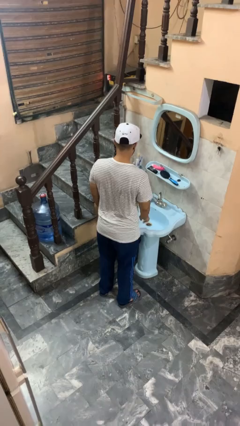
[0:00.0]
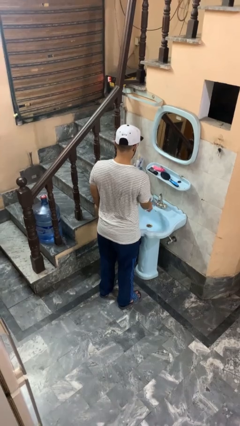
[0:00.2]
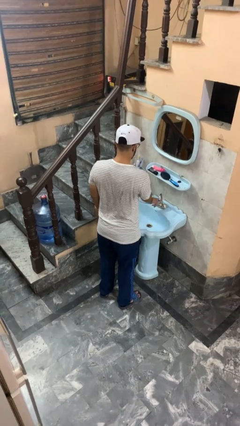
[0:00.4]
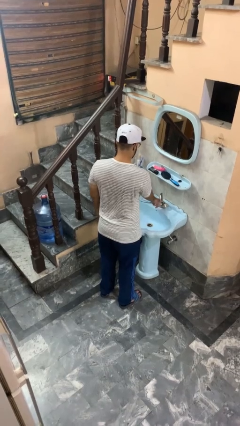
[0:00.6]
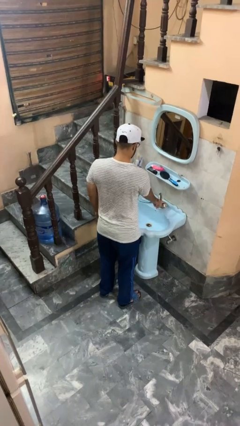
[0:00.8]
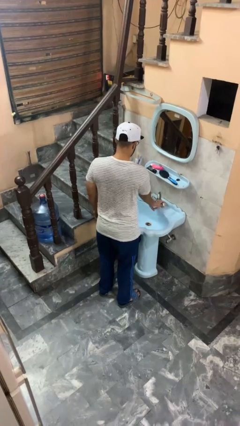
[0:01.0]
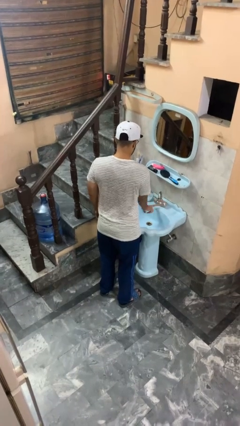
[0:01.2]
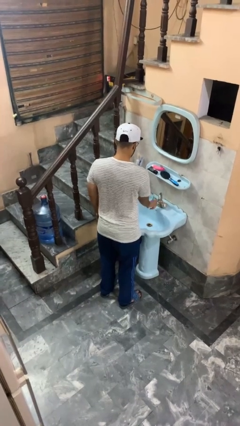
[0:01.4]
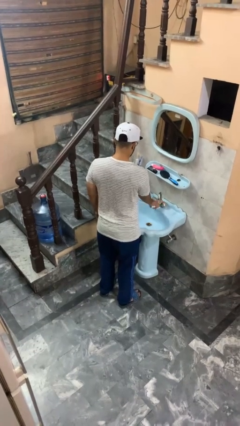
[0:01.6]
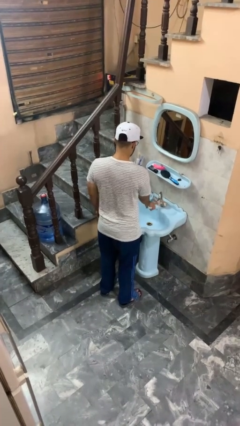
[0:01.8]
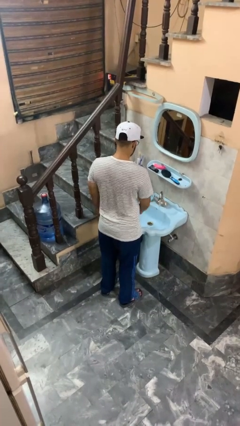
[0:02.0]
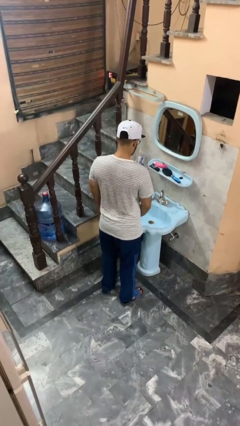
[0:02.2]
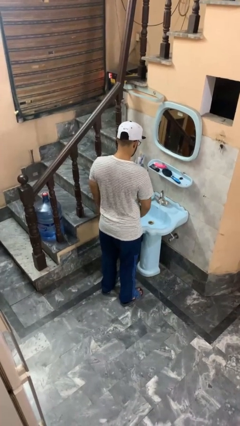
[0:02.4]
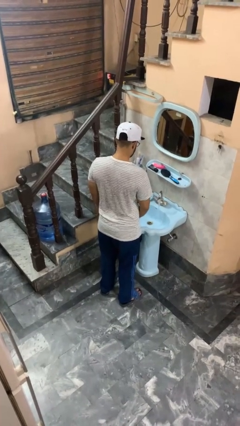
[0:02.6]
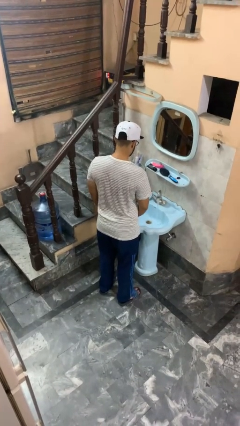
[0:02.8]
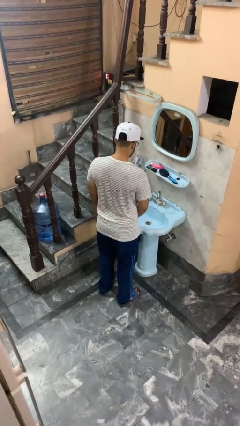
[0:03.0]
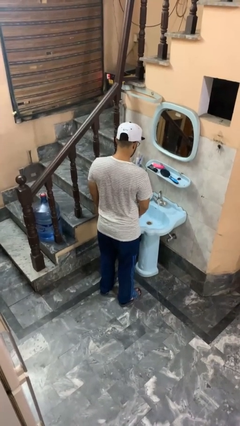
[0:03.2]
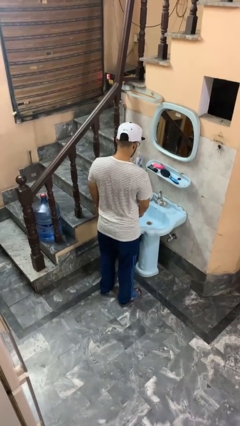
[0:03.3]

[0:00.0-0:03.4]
person turns on faucet

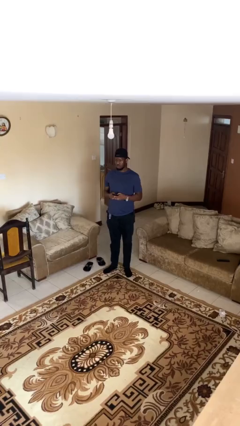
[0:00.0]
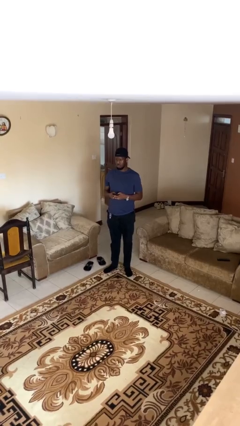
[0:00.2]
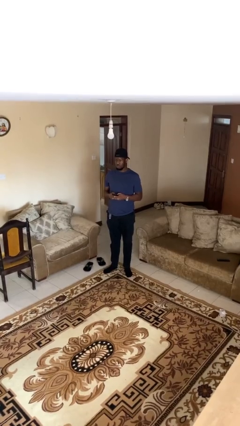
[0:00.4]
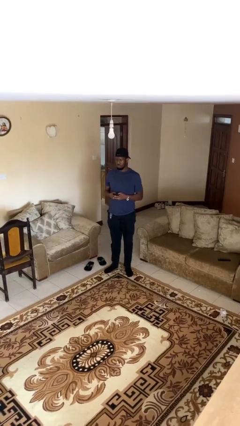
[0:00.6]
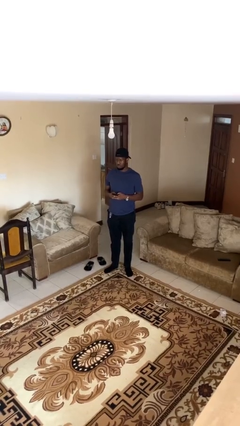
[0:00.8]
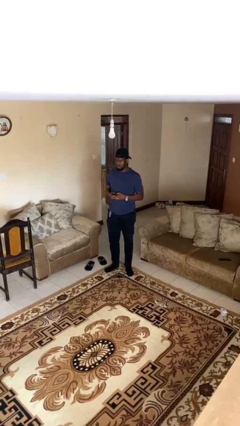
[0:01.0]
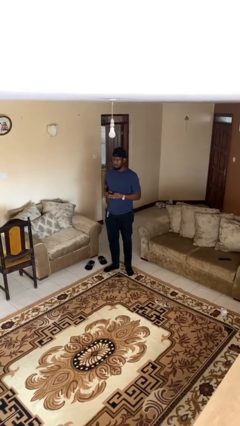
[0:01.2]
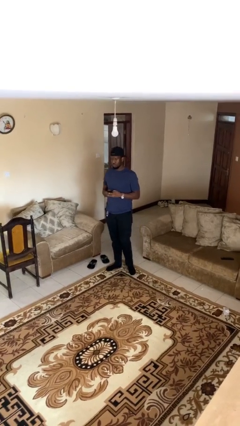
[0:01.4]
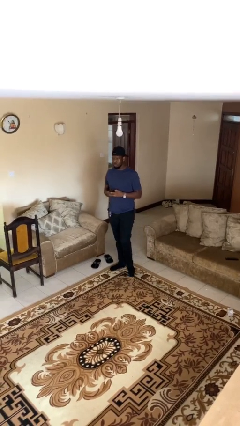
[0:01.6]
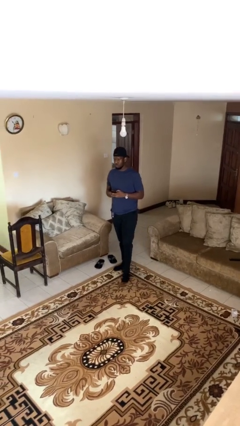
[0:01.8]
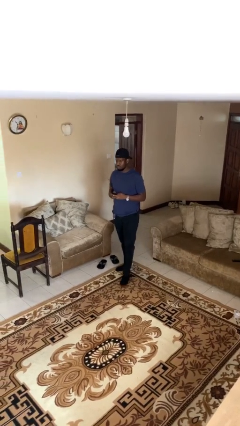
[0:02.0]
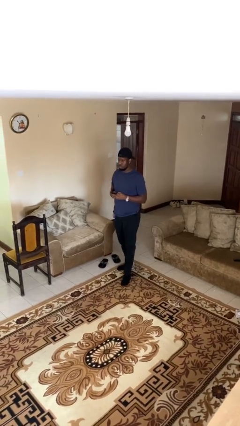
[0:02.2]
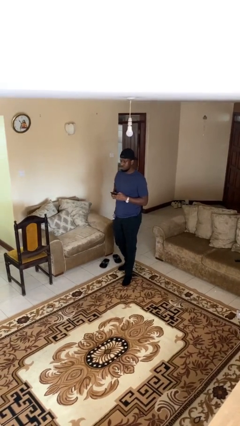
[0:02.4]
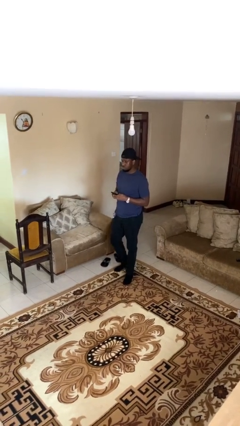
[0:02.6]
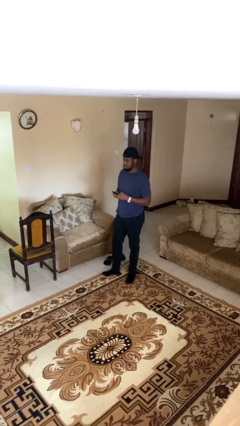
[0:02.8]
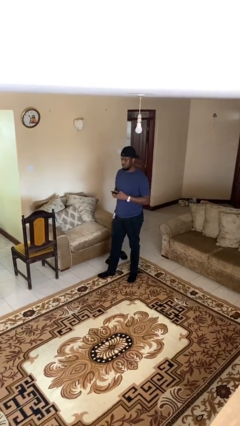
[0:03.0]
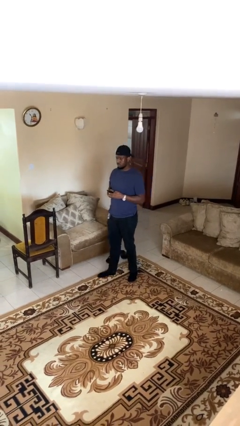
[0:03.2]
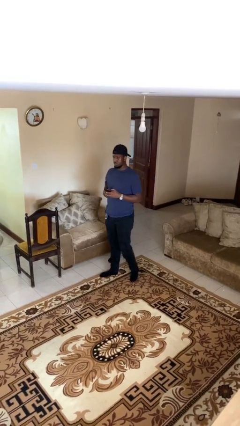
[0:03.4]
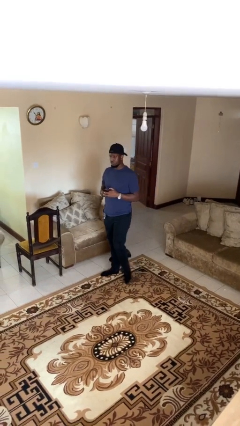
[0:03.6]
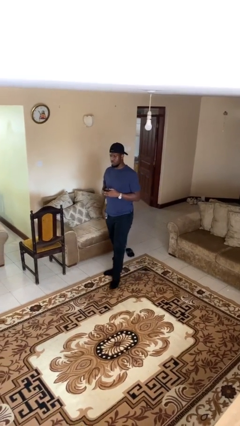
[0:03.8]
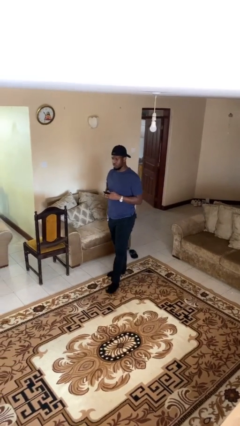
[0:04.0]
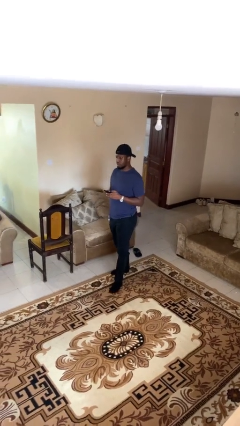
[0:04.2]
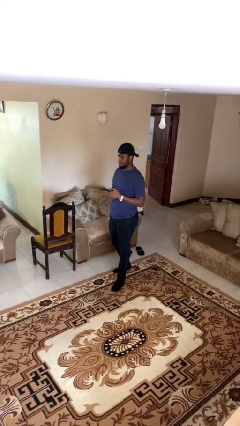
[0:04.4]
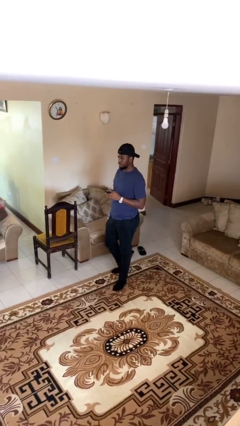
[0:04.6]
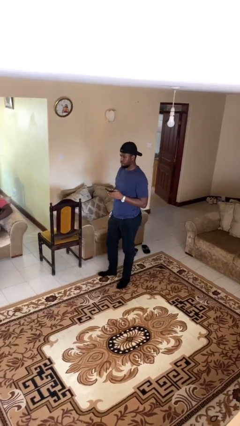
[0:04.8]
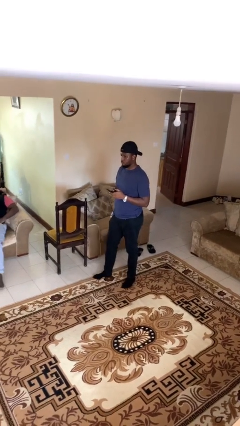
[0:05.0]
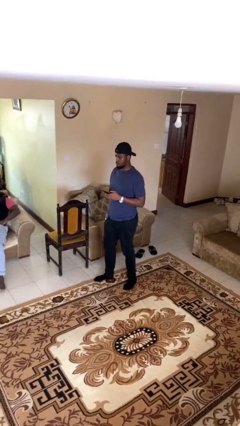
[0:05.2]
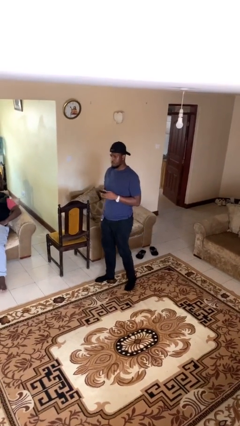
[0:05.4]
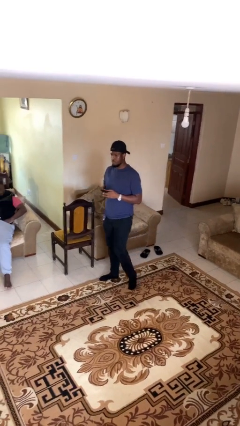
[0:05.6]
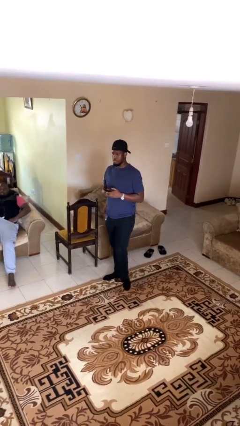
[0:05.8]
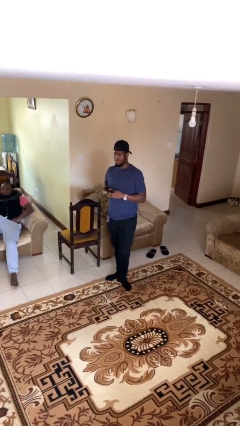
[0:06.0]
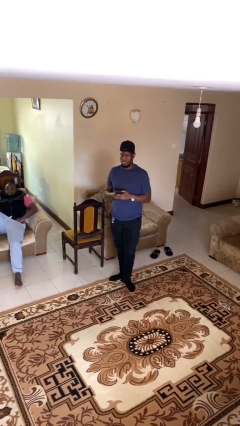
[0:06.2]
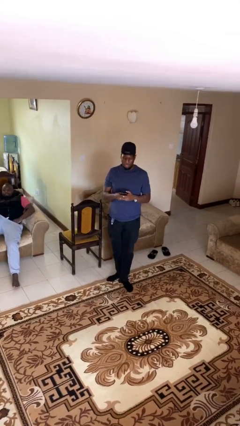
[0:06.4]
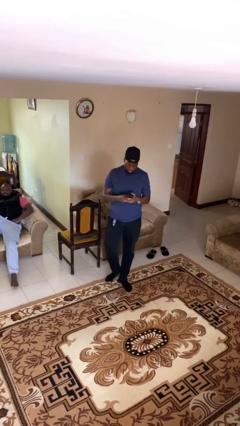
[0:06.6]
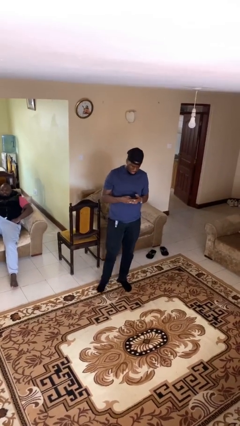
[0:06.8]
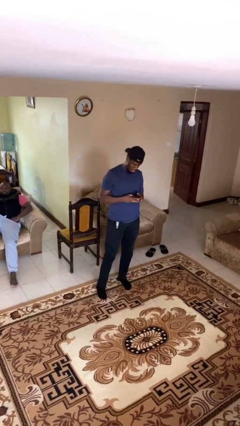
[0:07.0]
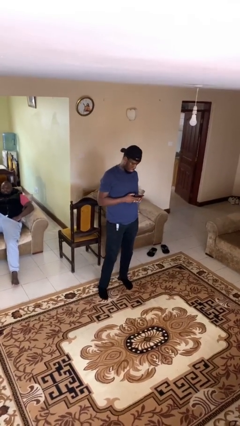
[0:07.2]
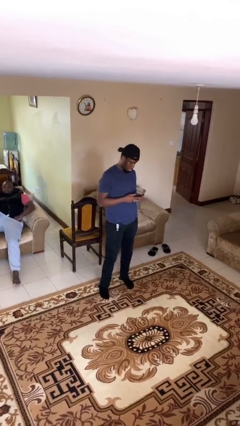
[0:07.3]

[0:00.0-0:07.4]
person texts on phone

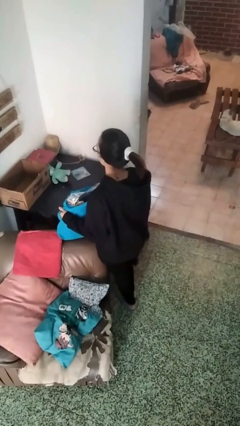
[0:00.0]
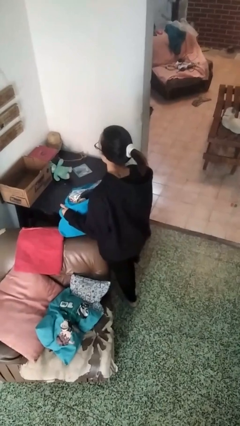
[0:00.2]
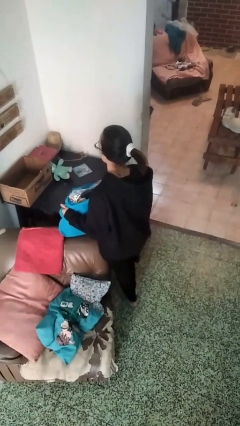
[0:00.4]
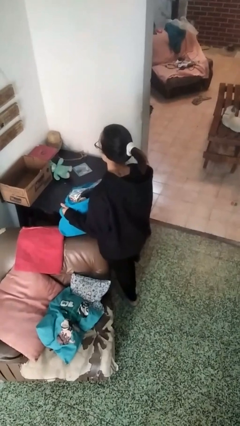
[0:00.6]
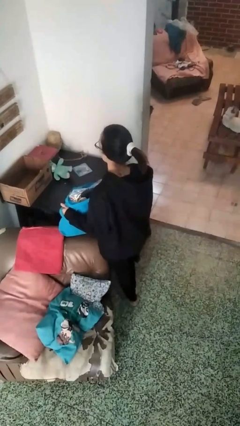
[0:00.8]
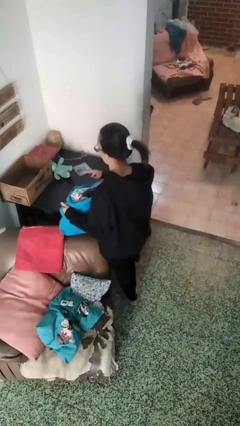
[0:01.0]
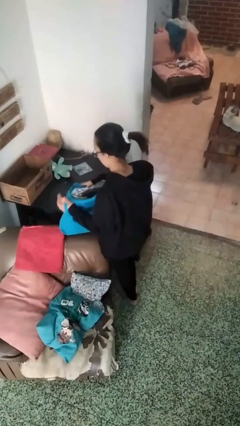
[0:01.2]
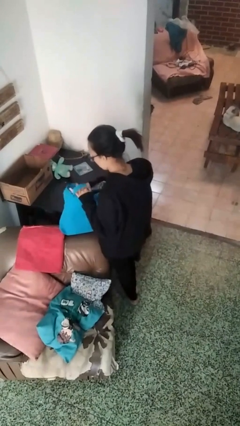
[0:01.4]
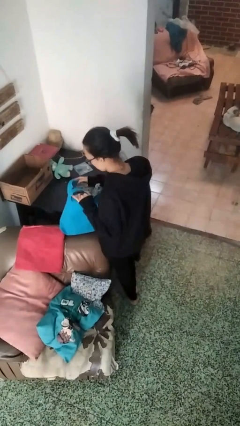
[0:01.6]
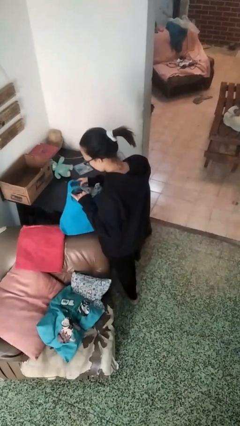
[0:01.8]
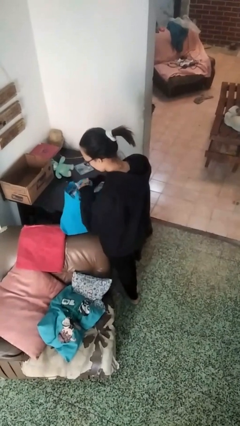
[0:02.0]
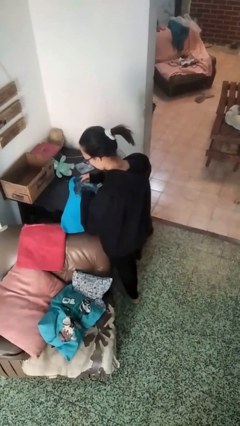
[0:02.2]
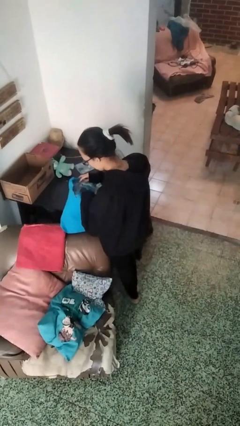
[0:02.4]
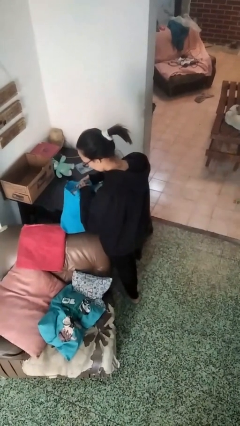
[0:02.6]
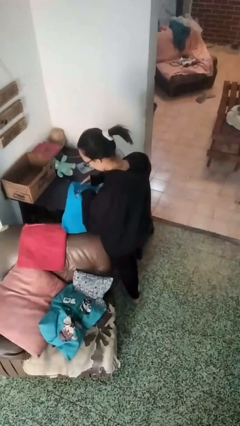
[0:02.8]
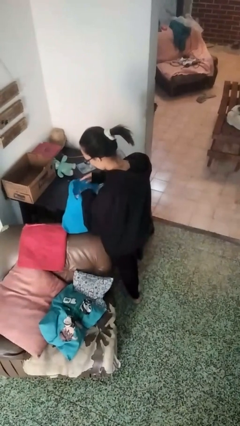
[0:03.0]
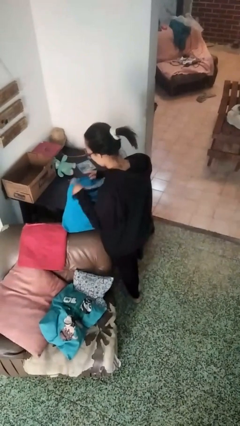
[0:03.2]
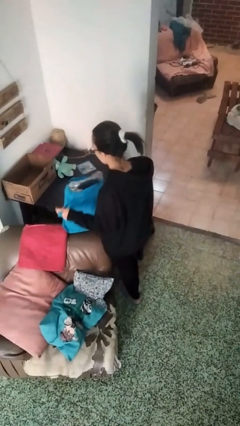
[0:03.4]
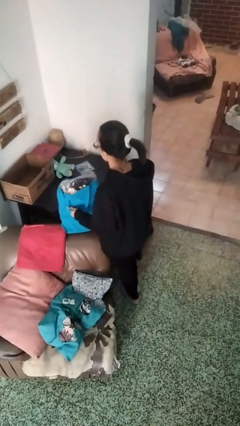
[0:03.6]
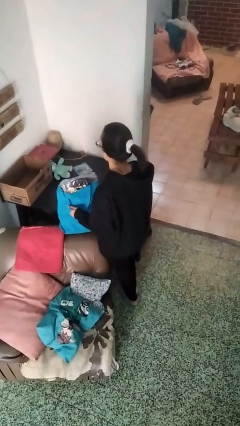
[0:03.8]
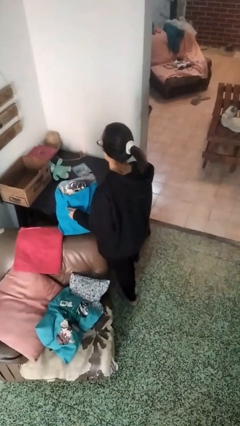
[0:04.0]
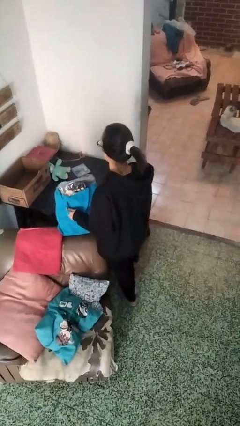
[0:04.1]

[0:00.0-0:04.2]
person searches in bag

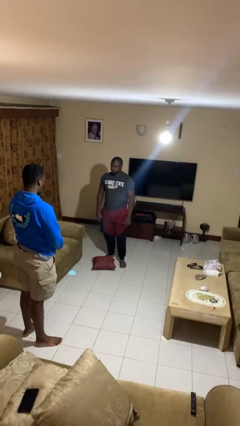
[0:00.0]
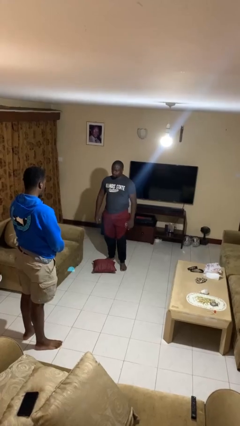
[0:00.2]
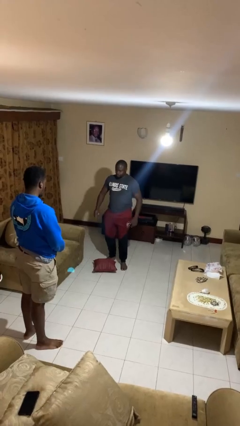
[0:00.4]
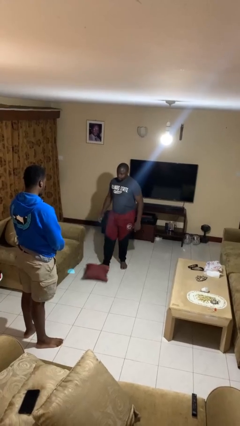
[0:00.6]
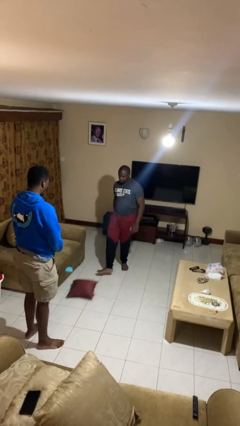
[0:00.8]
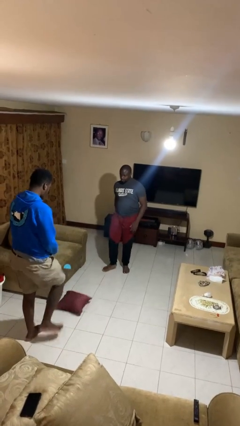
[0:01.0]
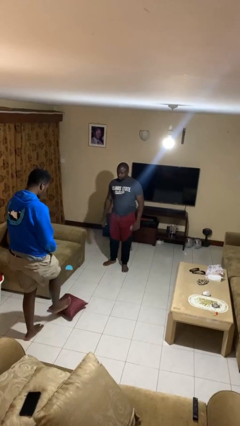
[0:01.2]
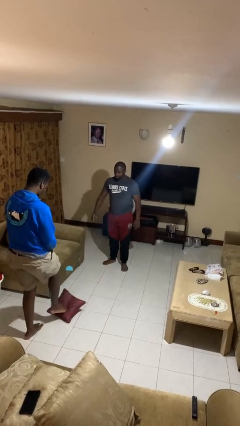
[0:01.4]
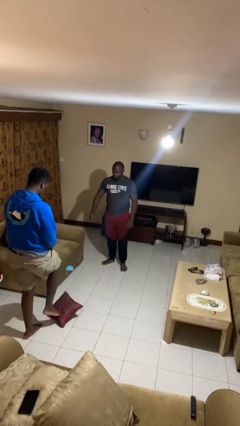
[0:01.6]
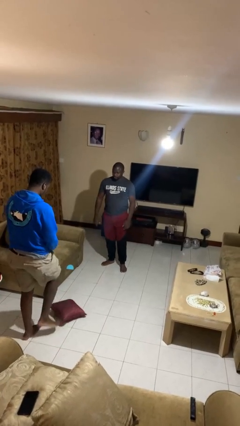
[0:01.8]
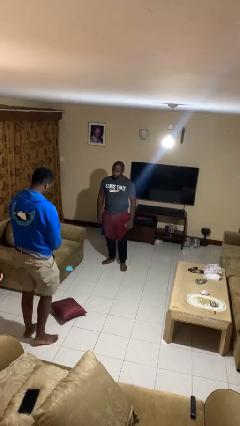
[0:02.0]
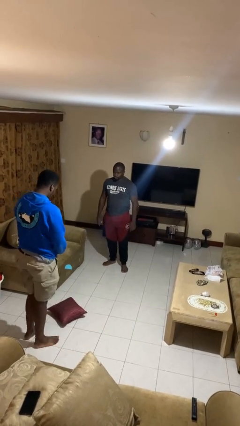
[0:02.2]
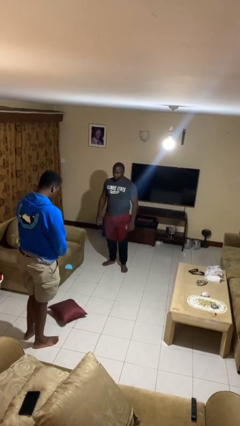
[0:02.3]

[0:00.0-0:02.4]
person kicks object to person

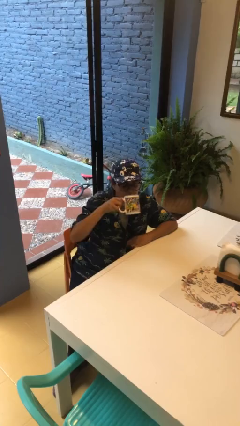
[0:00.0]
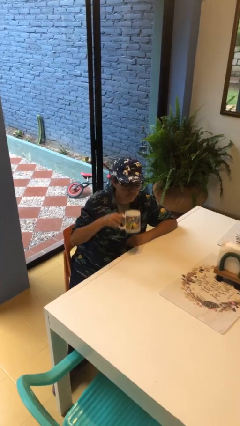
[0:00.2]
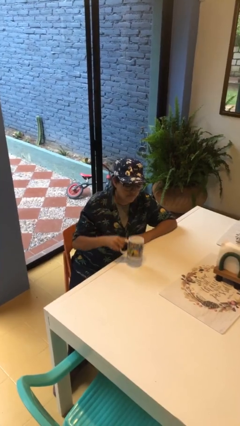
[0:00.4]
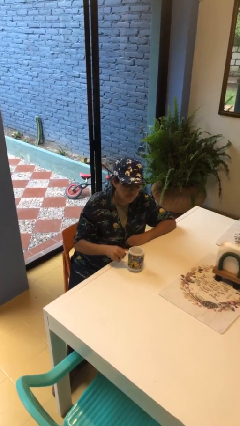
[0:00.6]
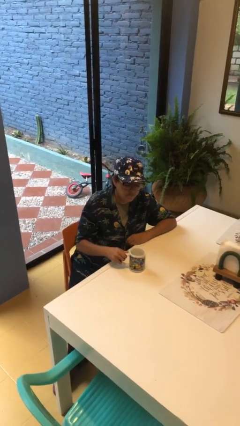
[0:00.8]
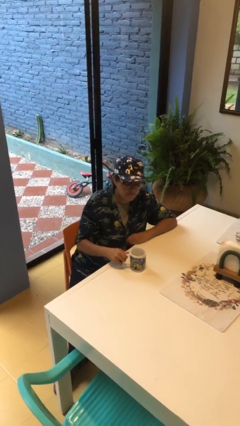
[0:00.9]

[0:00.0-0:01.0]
person puts down object on table
